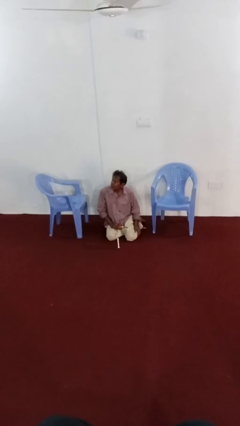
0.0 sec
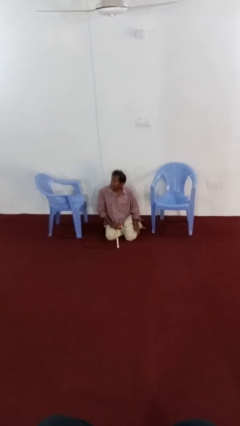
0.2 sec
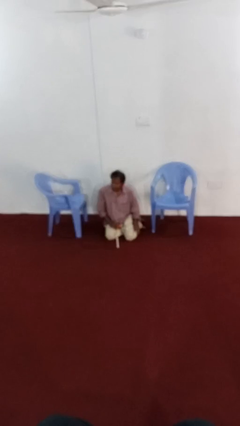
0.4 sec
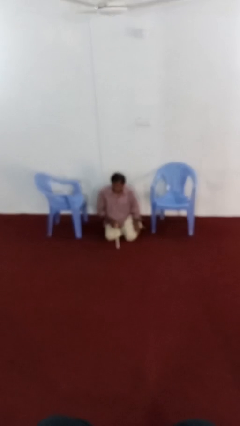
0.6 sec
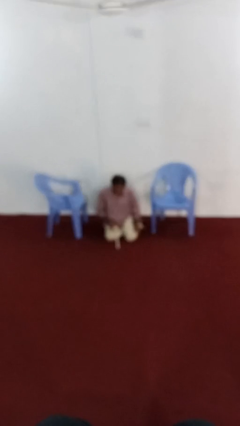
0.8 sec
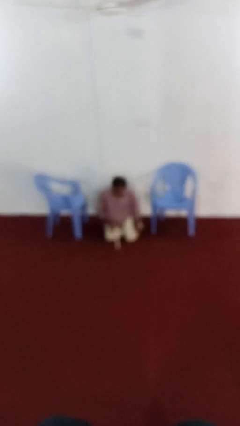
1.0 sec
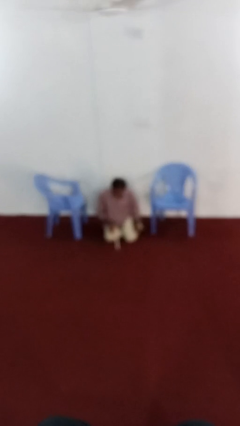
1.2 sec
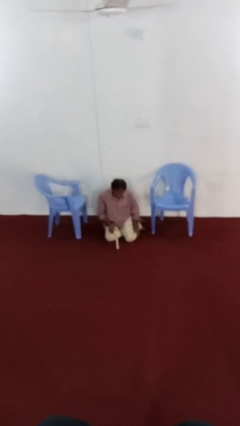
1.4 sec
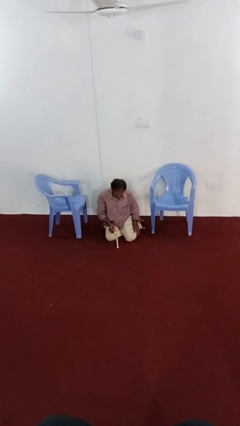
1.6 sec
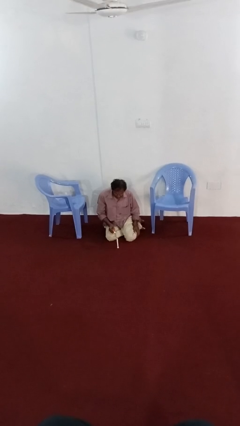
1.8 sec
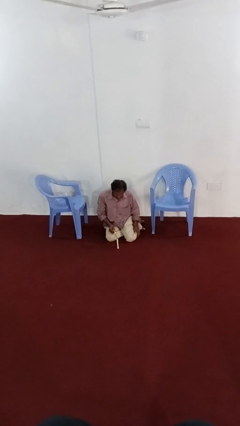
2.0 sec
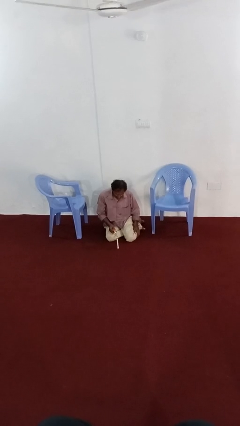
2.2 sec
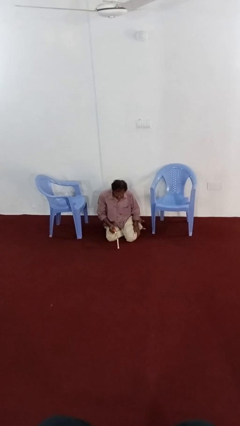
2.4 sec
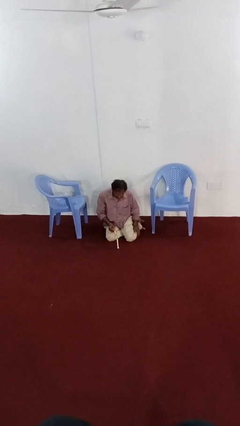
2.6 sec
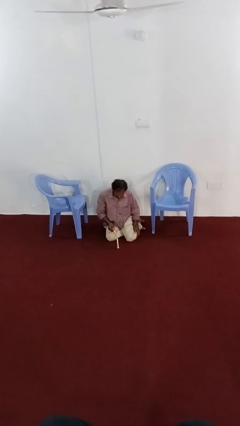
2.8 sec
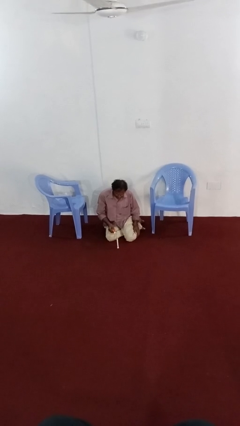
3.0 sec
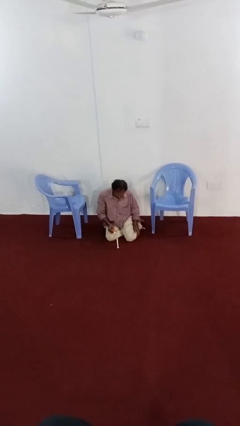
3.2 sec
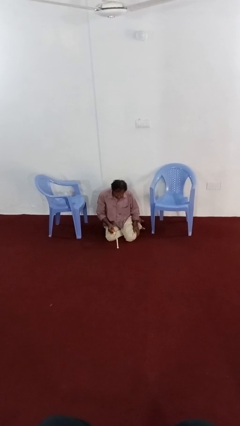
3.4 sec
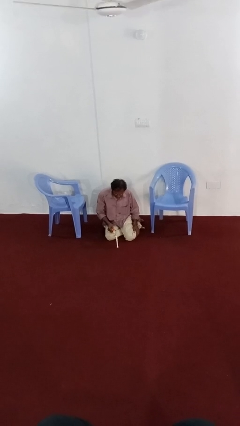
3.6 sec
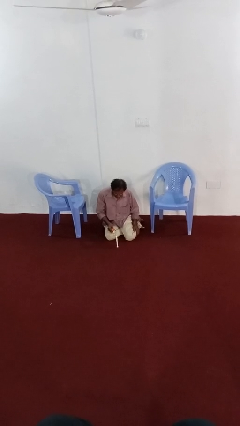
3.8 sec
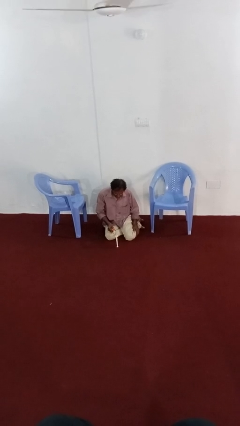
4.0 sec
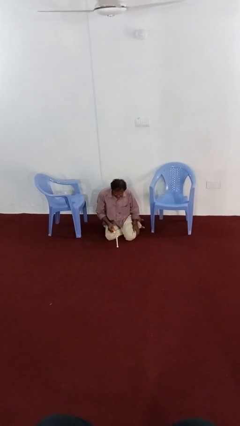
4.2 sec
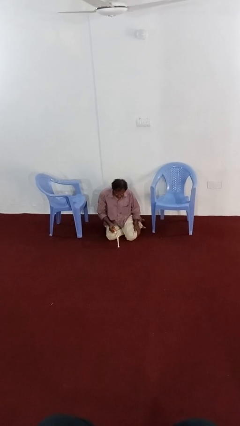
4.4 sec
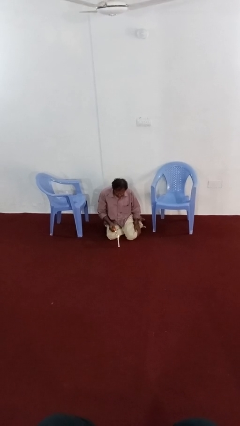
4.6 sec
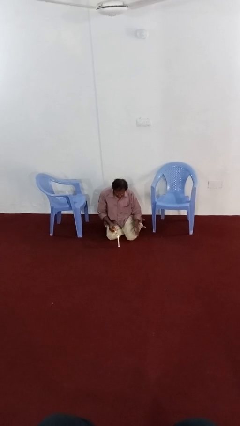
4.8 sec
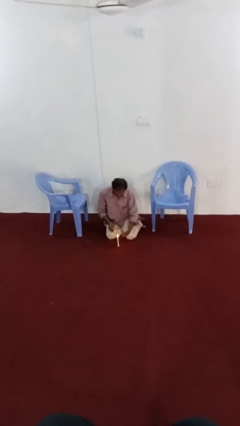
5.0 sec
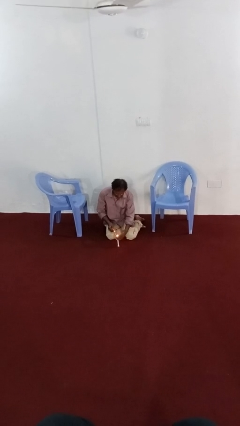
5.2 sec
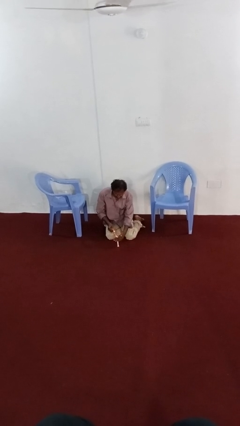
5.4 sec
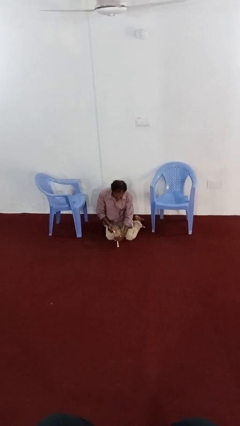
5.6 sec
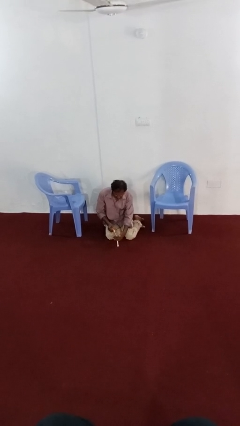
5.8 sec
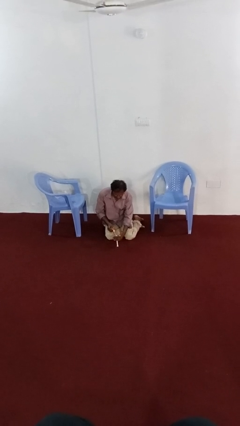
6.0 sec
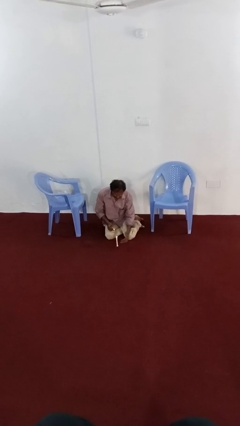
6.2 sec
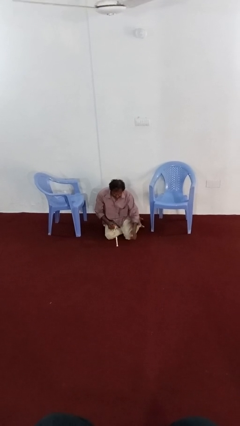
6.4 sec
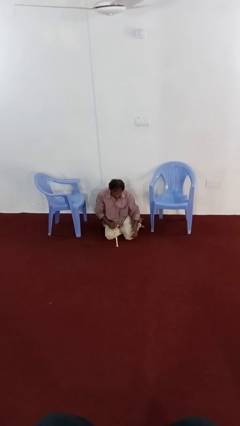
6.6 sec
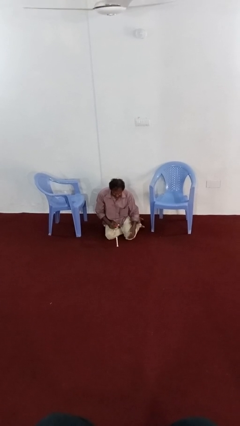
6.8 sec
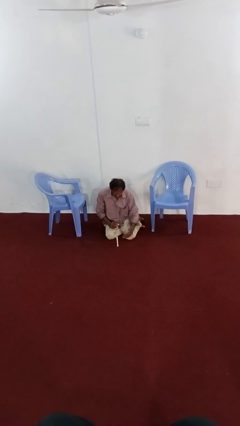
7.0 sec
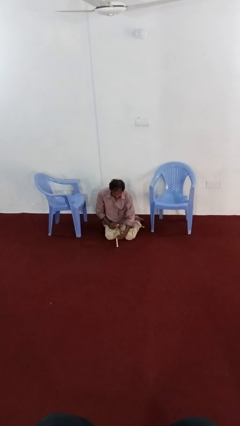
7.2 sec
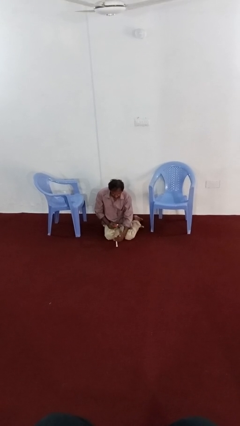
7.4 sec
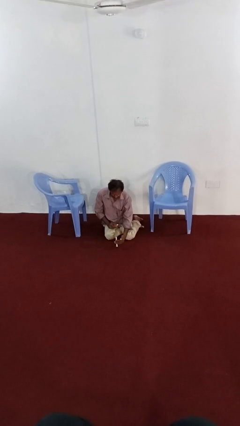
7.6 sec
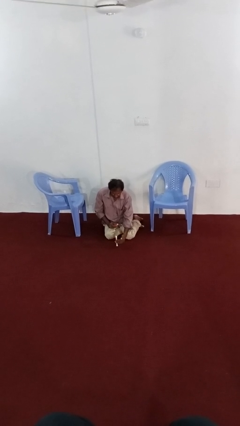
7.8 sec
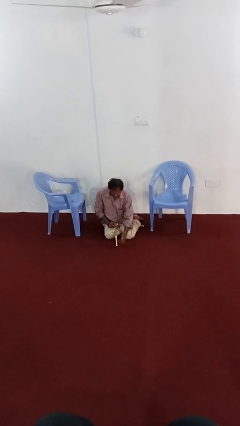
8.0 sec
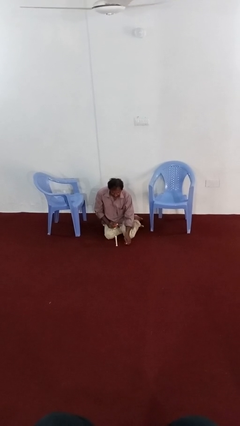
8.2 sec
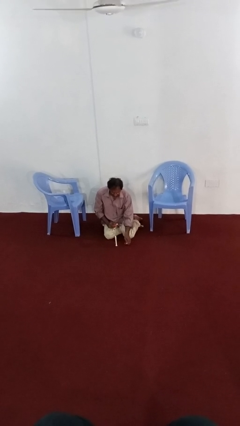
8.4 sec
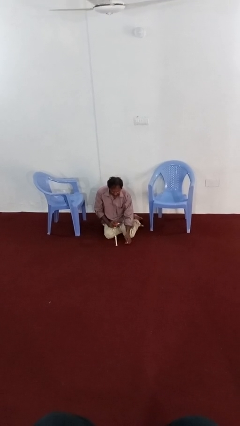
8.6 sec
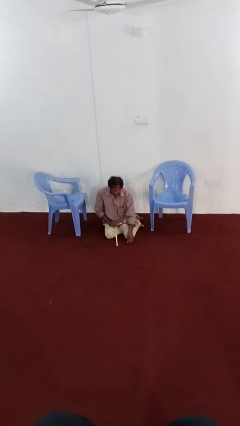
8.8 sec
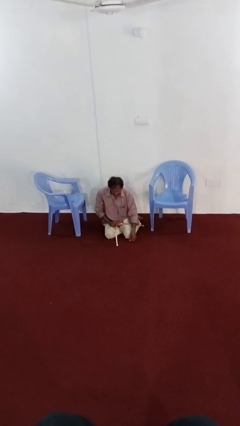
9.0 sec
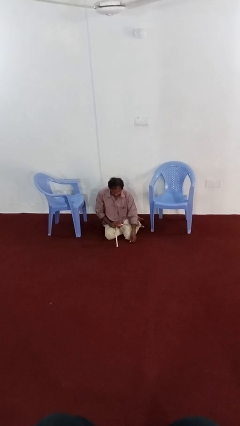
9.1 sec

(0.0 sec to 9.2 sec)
person lights candle

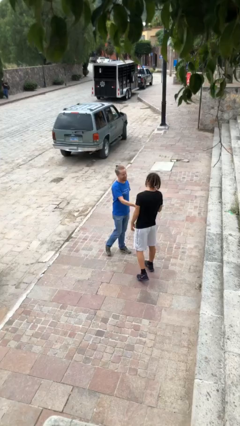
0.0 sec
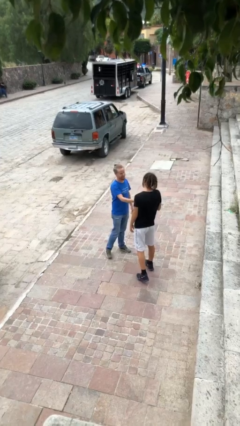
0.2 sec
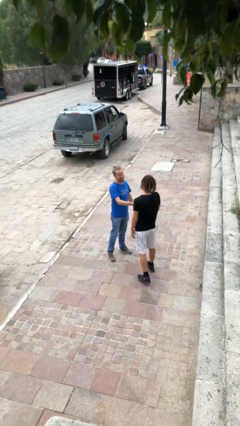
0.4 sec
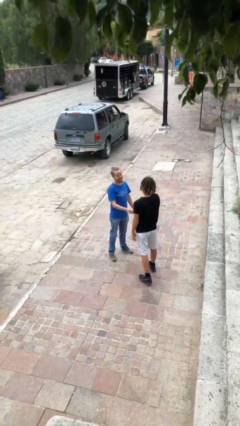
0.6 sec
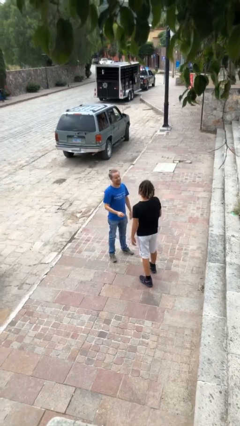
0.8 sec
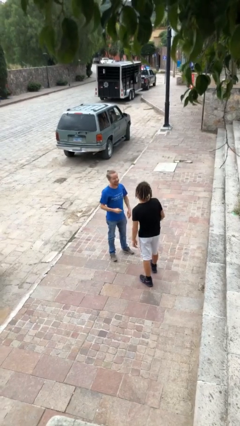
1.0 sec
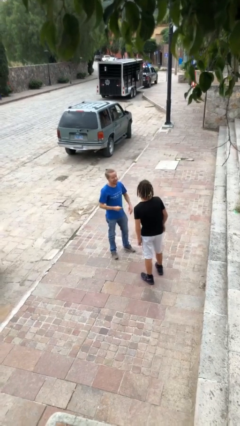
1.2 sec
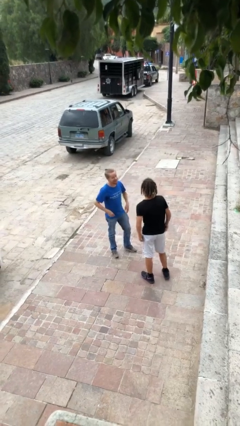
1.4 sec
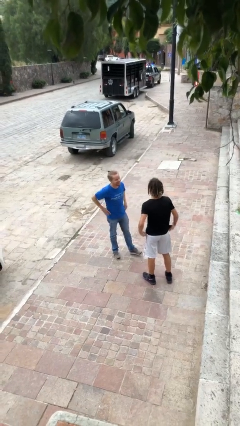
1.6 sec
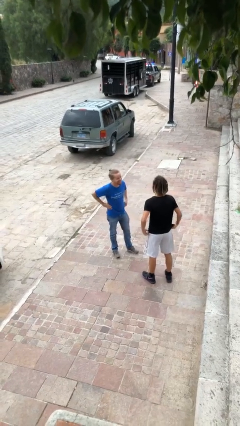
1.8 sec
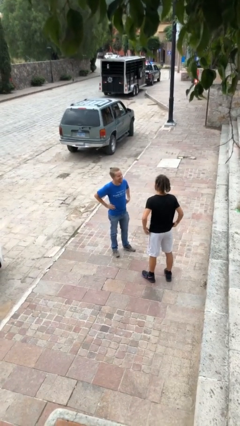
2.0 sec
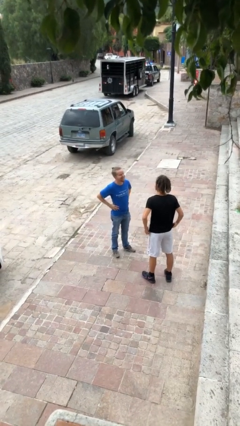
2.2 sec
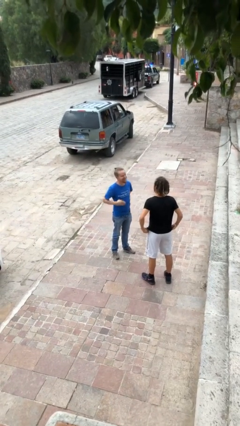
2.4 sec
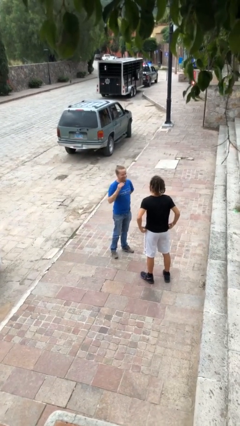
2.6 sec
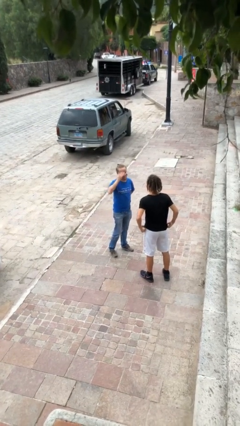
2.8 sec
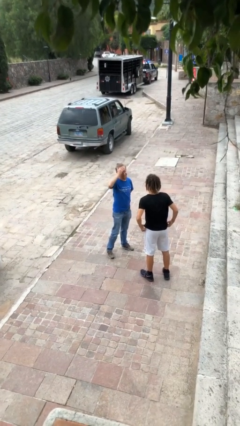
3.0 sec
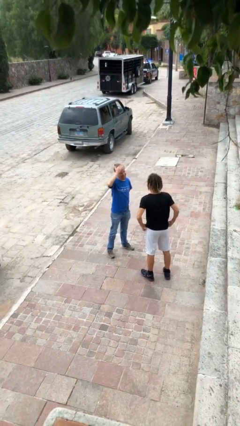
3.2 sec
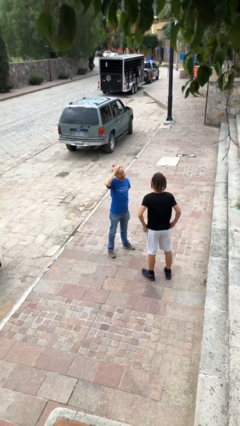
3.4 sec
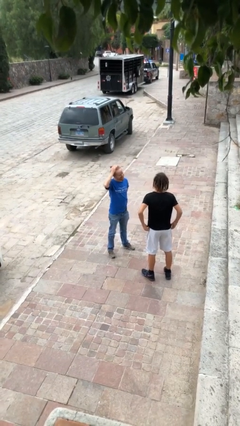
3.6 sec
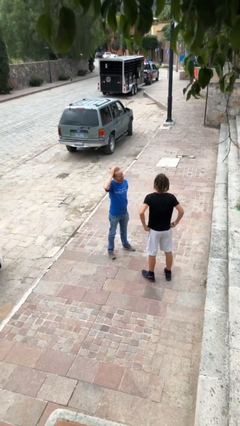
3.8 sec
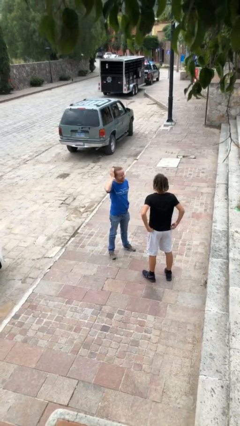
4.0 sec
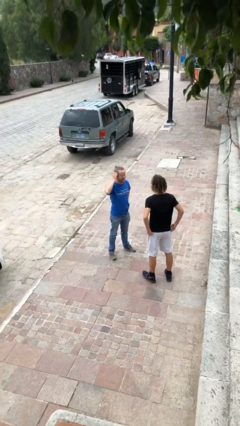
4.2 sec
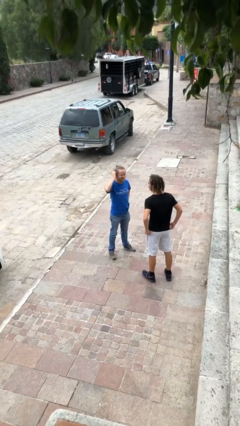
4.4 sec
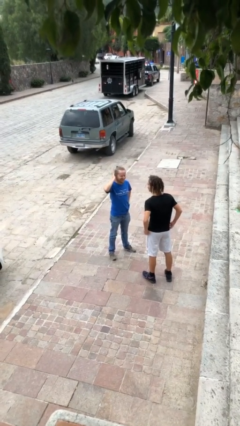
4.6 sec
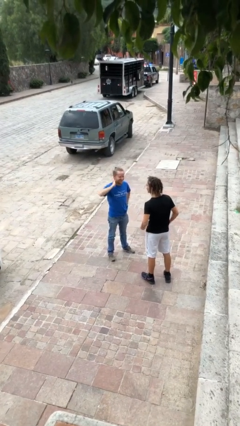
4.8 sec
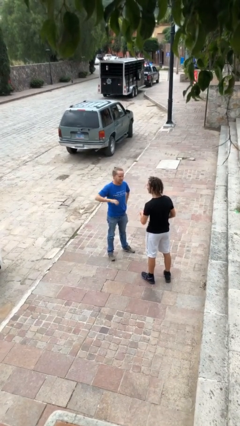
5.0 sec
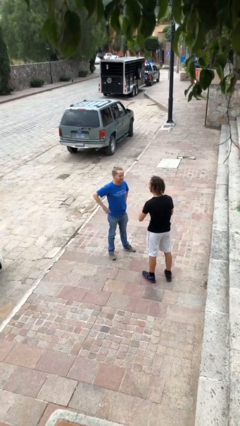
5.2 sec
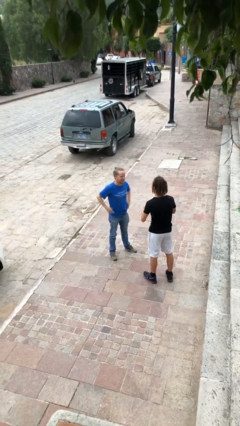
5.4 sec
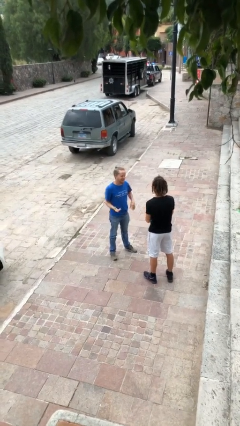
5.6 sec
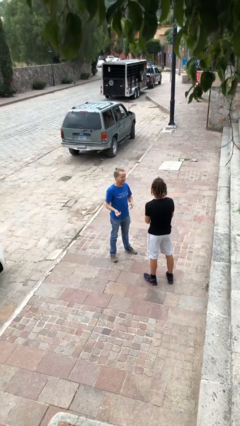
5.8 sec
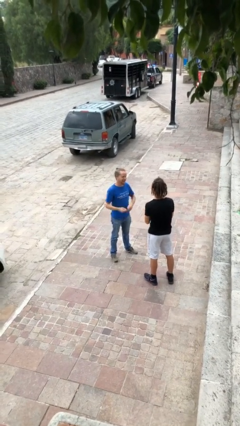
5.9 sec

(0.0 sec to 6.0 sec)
person talks to person

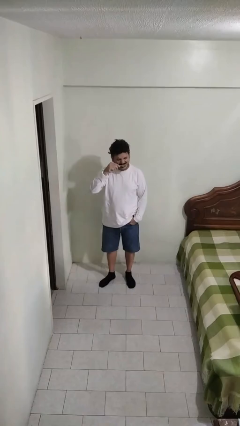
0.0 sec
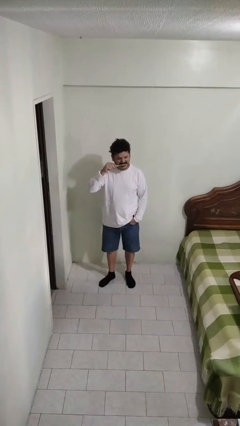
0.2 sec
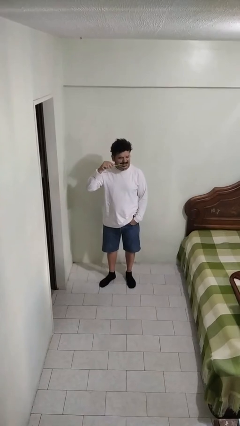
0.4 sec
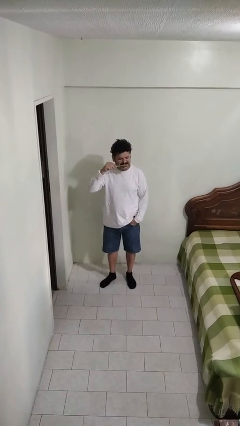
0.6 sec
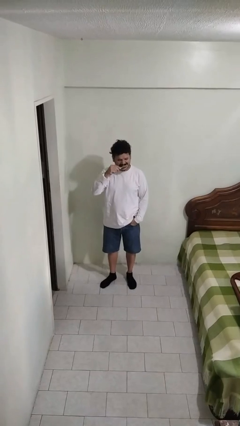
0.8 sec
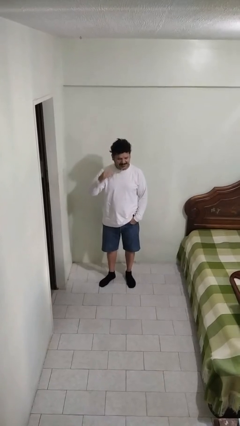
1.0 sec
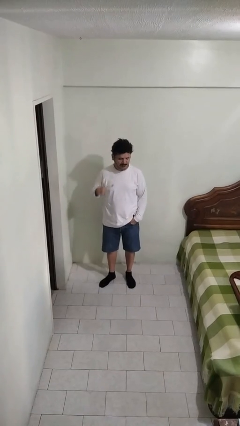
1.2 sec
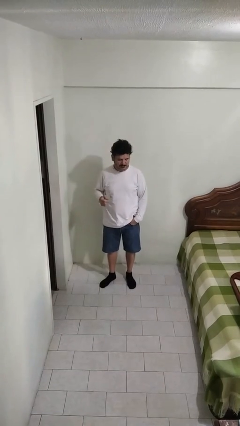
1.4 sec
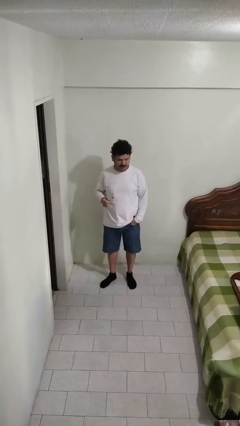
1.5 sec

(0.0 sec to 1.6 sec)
person brushes teeth

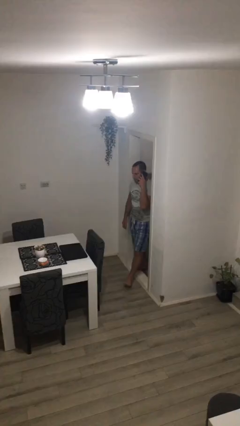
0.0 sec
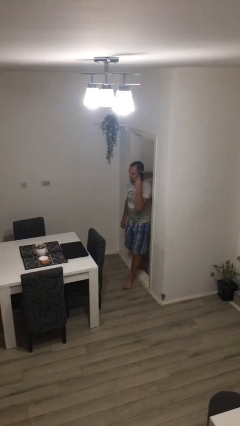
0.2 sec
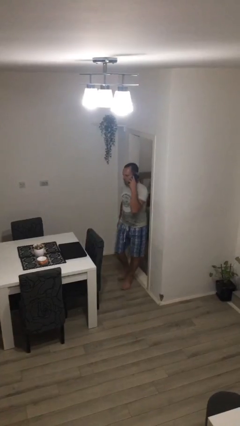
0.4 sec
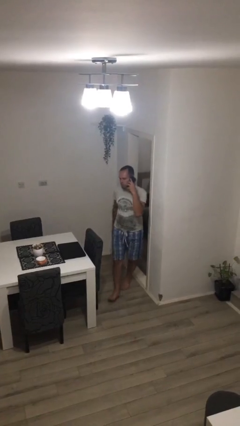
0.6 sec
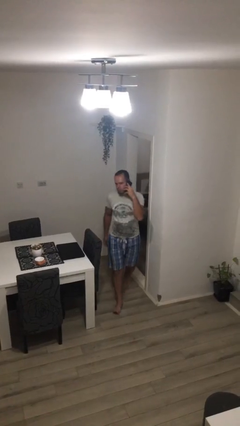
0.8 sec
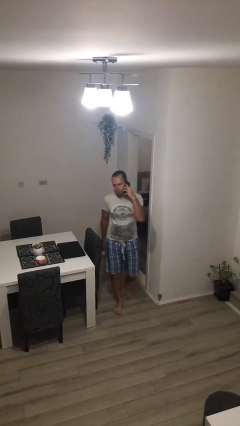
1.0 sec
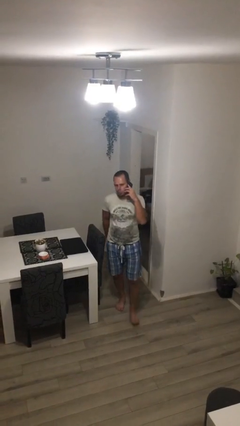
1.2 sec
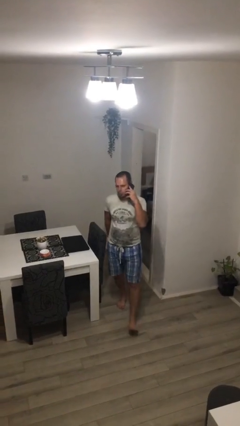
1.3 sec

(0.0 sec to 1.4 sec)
person enters scene through structure
